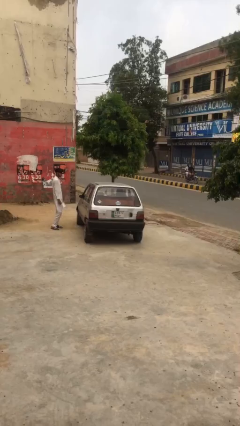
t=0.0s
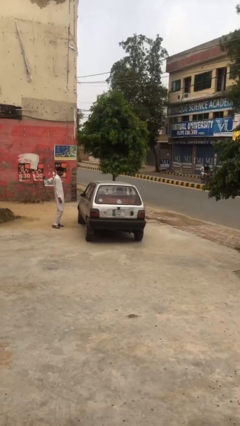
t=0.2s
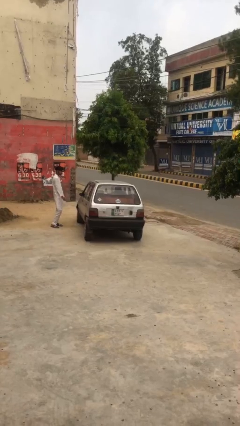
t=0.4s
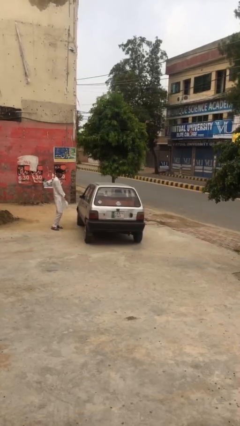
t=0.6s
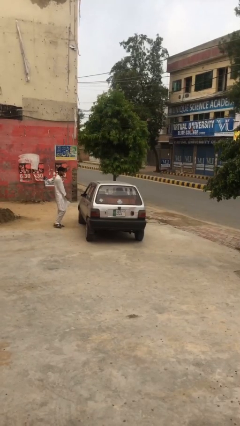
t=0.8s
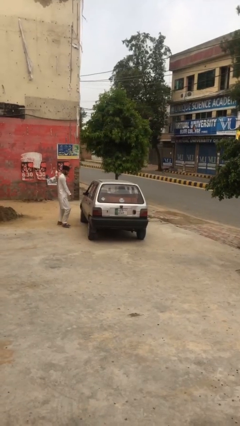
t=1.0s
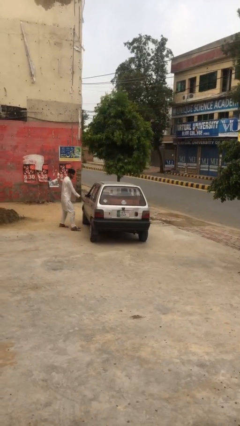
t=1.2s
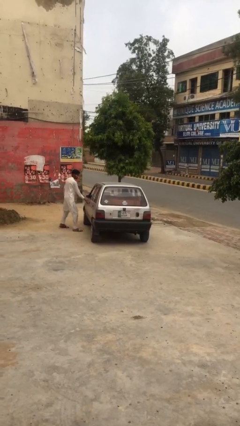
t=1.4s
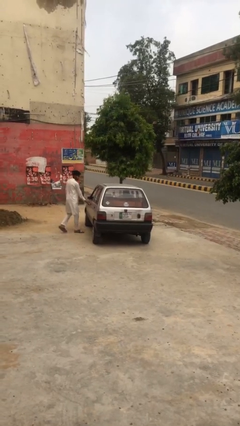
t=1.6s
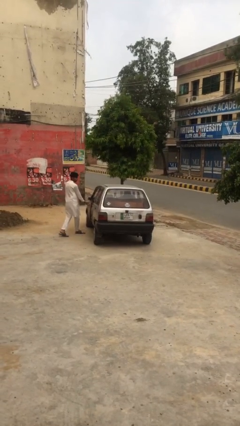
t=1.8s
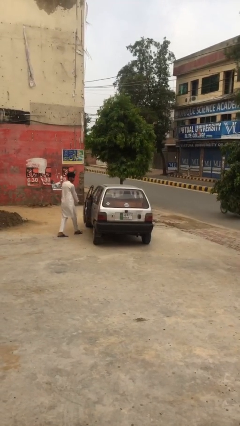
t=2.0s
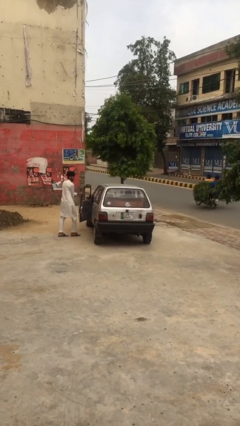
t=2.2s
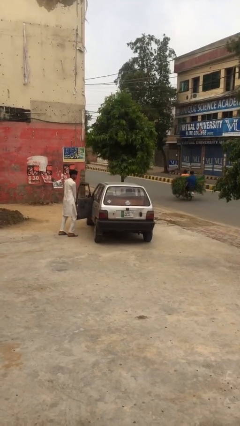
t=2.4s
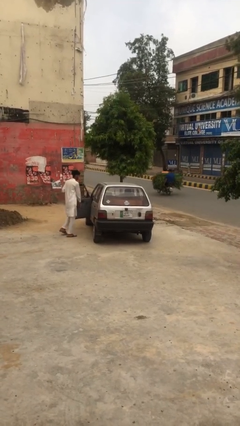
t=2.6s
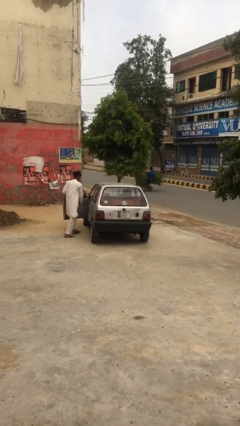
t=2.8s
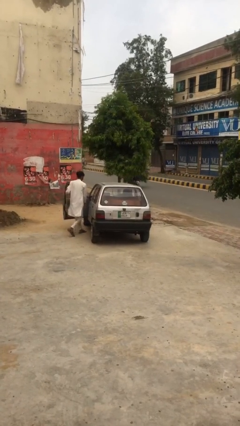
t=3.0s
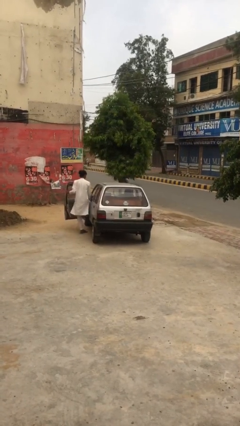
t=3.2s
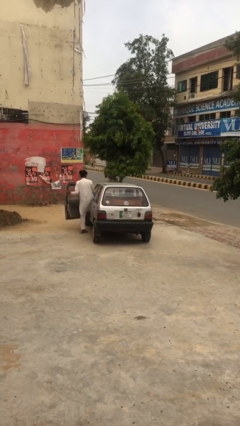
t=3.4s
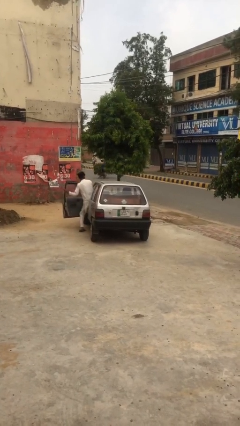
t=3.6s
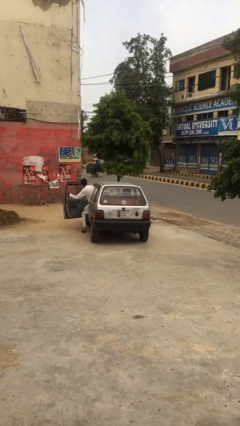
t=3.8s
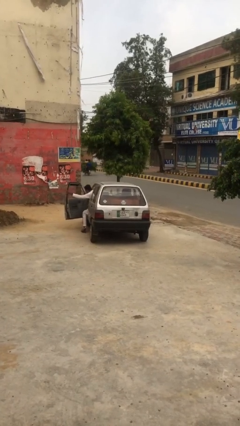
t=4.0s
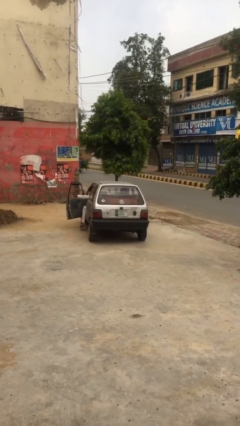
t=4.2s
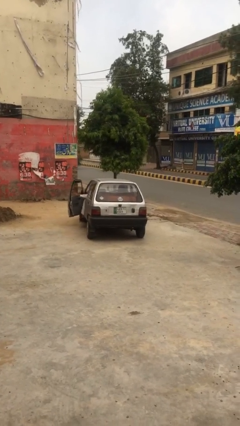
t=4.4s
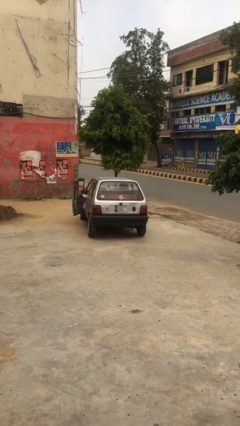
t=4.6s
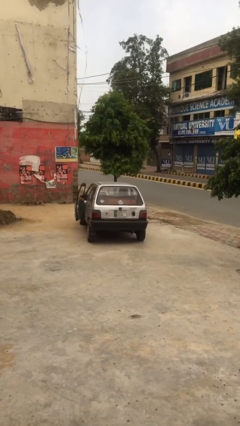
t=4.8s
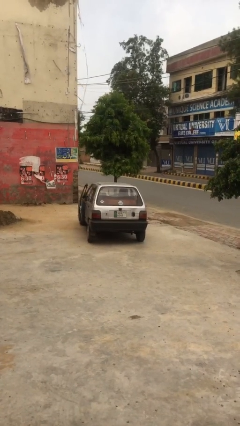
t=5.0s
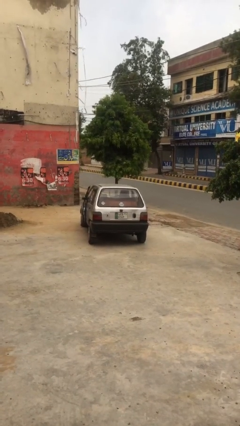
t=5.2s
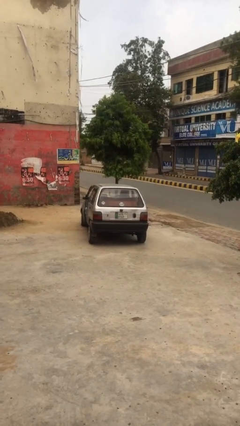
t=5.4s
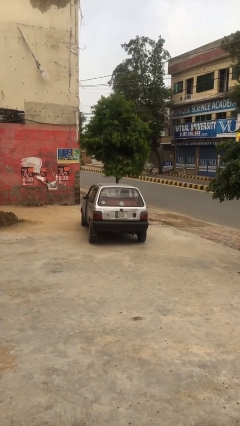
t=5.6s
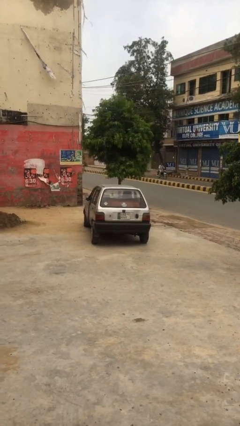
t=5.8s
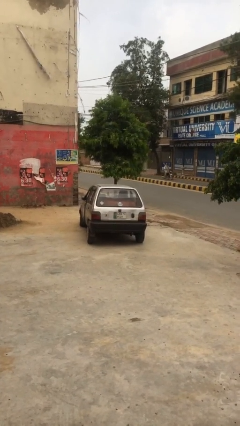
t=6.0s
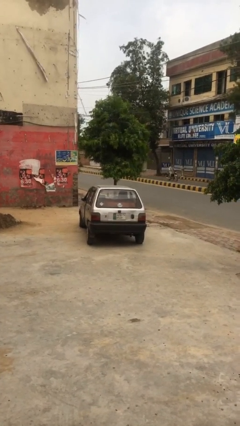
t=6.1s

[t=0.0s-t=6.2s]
car picks up person

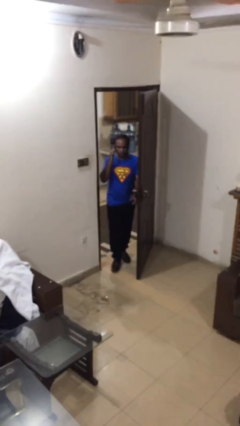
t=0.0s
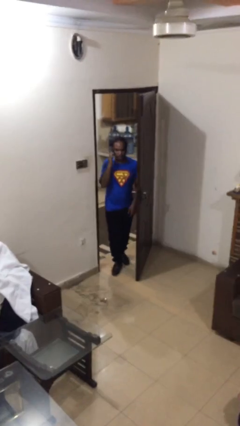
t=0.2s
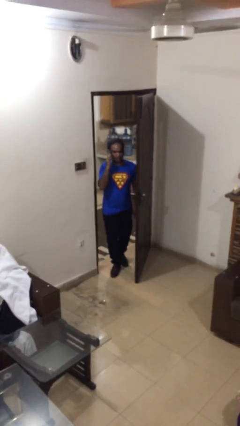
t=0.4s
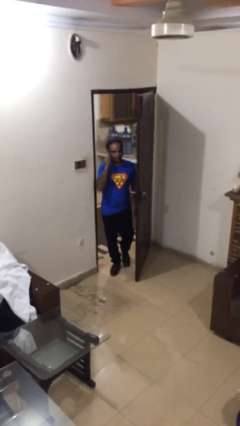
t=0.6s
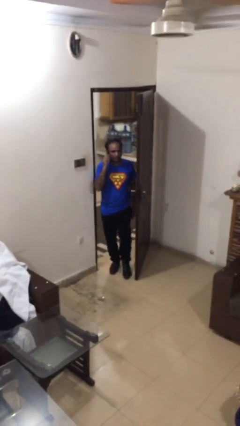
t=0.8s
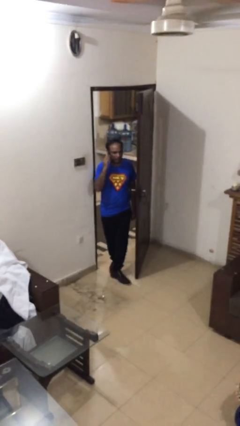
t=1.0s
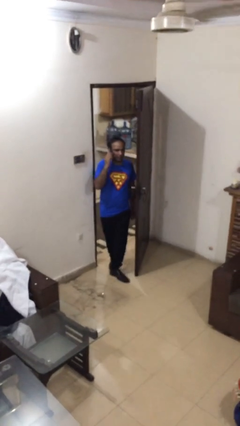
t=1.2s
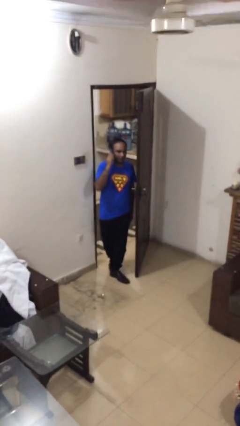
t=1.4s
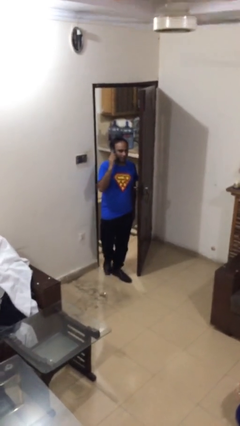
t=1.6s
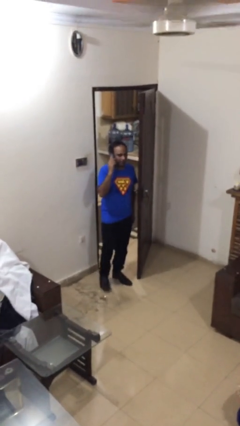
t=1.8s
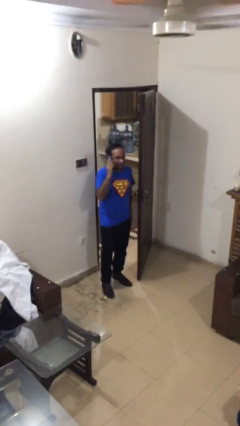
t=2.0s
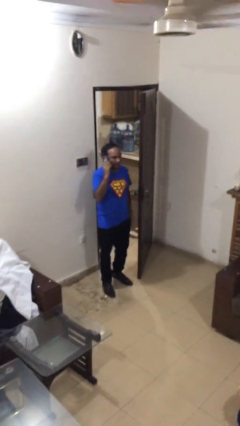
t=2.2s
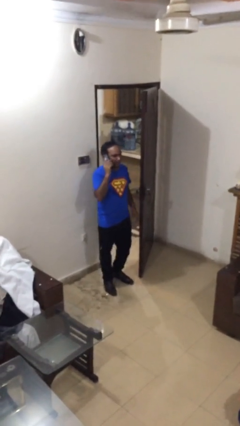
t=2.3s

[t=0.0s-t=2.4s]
person enters scene through structure

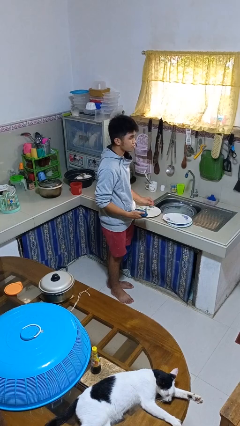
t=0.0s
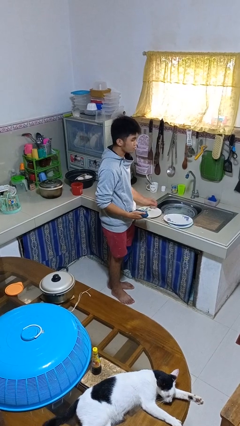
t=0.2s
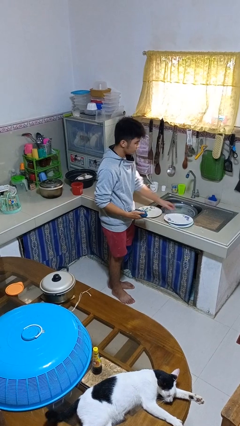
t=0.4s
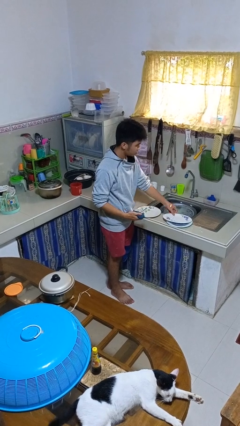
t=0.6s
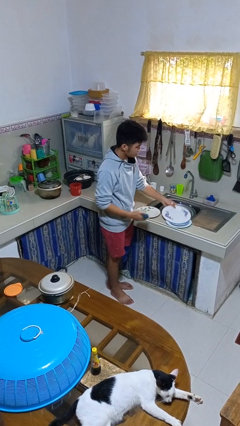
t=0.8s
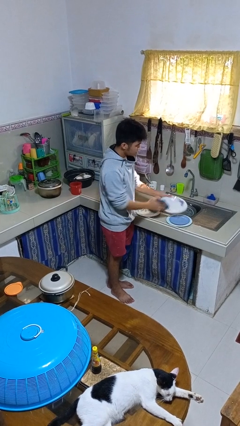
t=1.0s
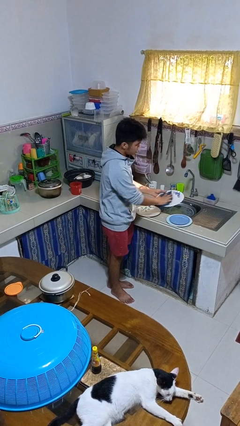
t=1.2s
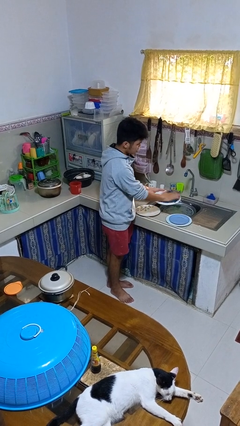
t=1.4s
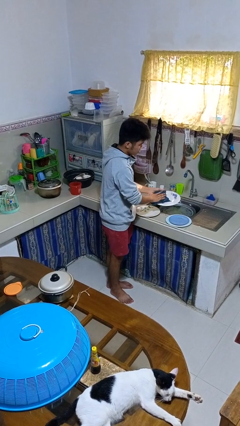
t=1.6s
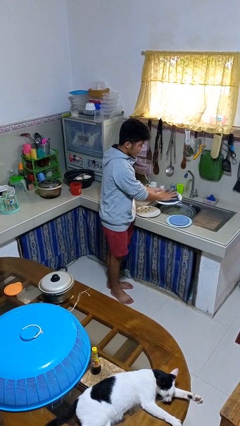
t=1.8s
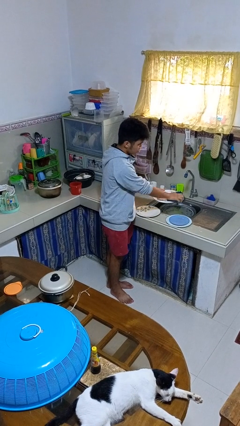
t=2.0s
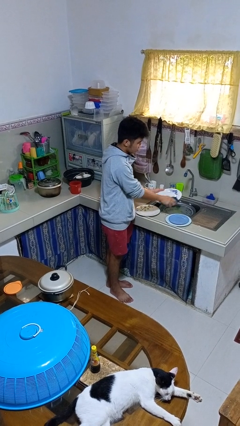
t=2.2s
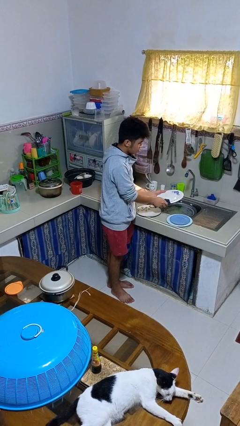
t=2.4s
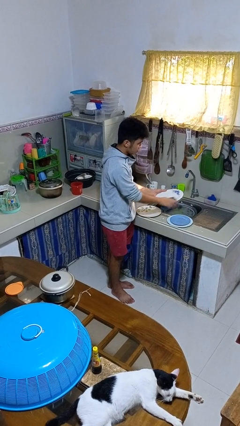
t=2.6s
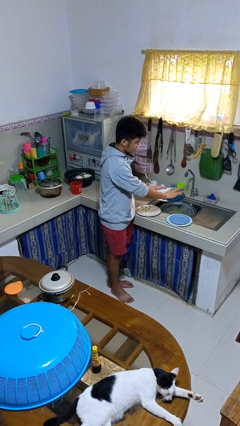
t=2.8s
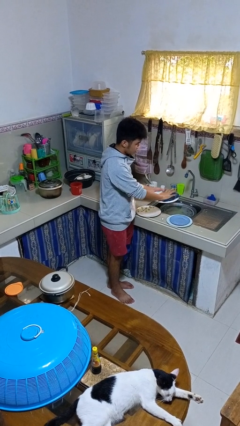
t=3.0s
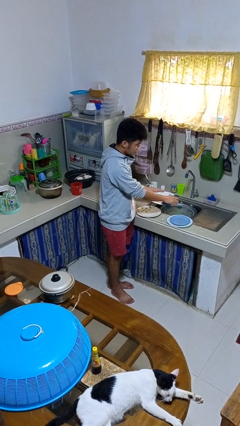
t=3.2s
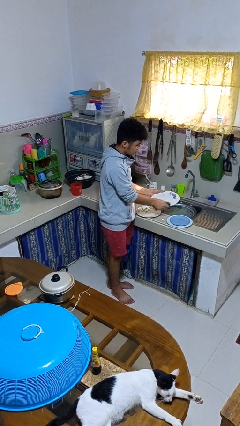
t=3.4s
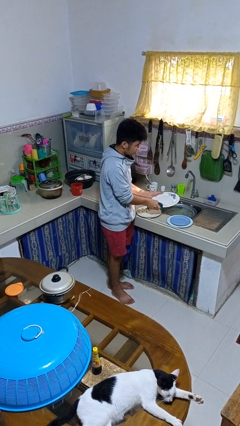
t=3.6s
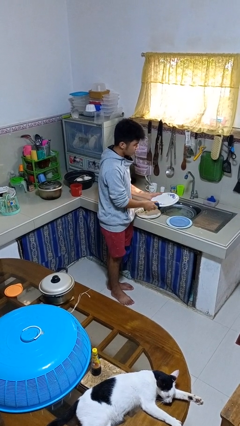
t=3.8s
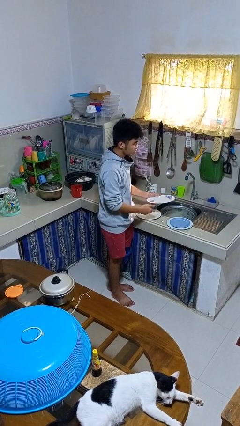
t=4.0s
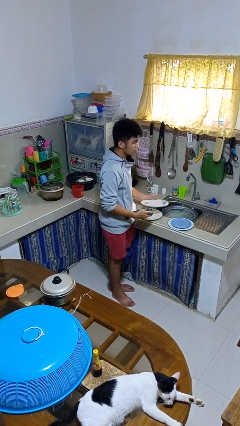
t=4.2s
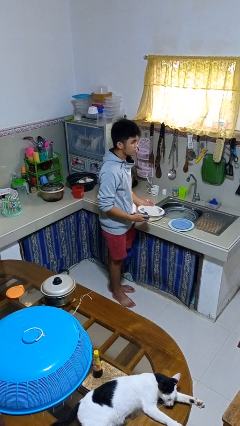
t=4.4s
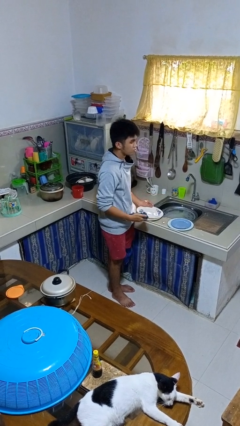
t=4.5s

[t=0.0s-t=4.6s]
person dries dish

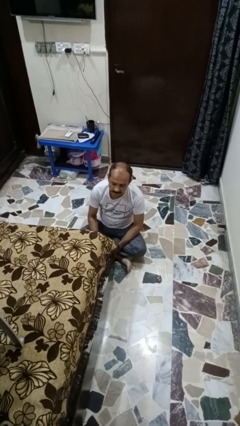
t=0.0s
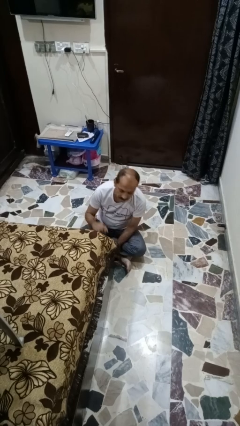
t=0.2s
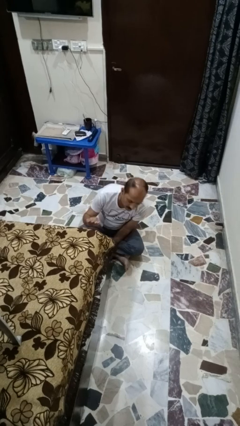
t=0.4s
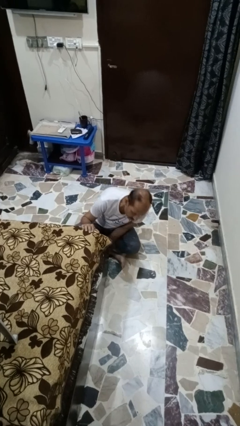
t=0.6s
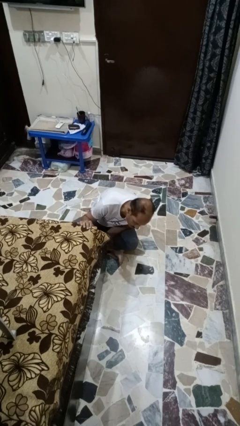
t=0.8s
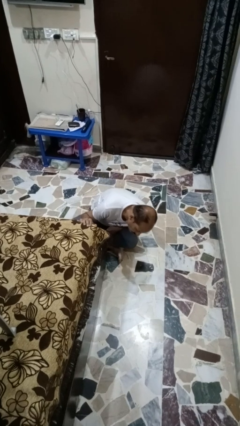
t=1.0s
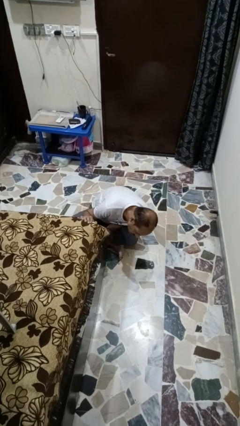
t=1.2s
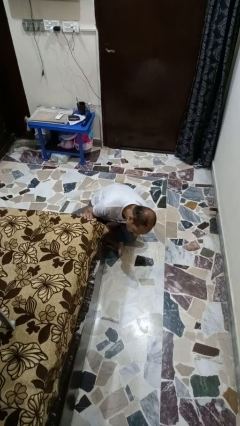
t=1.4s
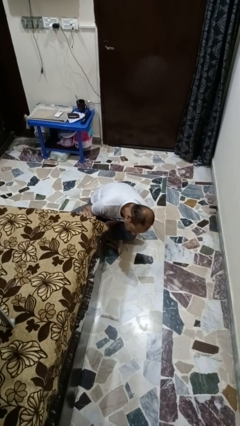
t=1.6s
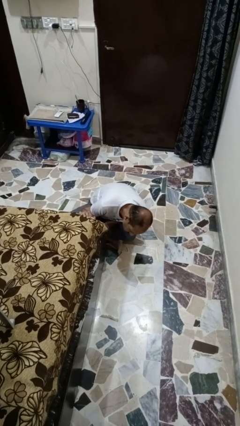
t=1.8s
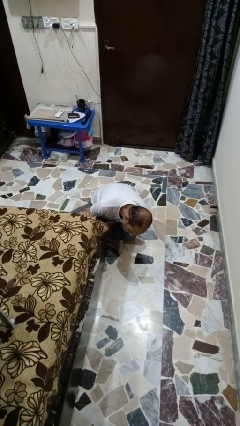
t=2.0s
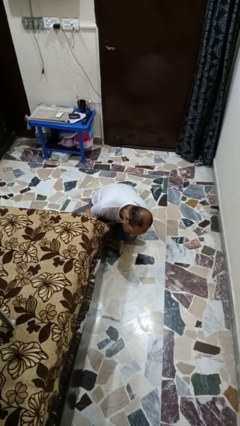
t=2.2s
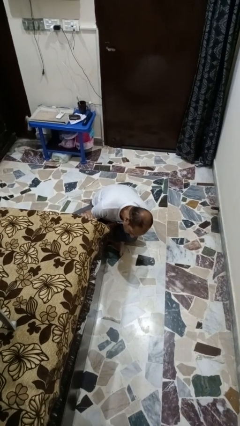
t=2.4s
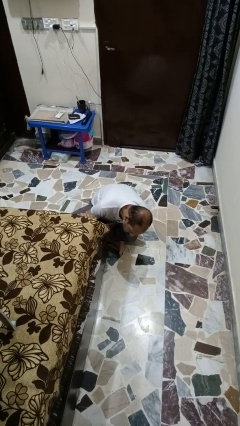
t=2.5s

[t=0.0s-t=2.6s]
person searches under bed

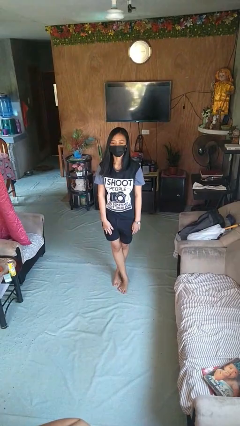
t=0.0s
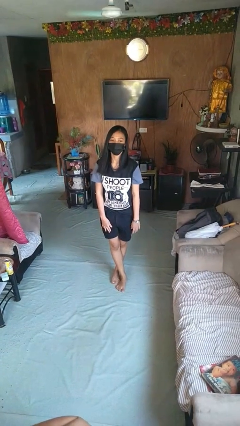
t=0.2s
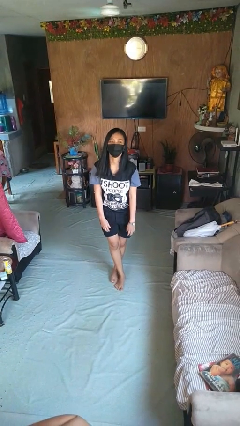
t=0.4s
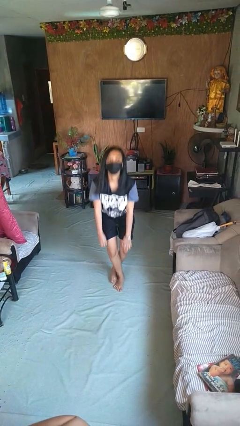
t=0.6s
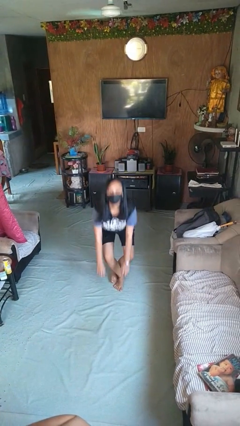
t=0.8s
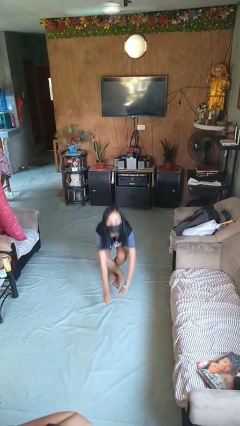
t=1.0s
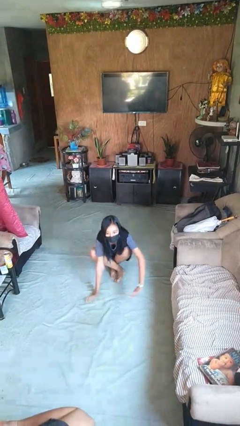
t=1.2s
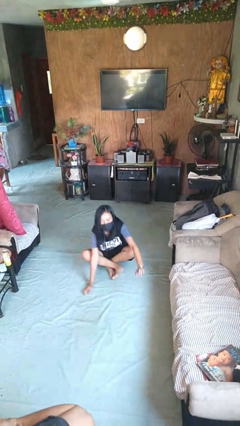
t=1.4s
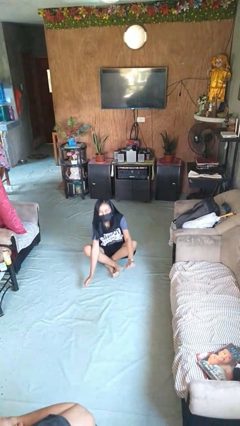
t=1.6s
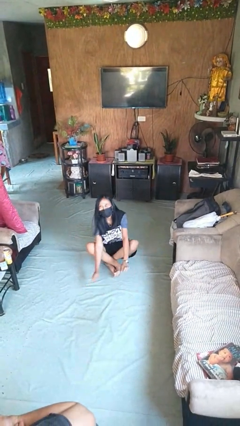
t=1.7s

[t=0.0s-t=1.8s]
person sits crisscross
